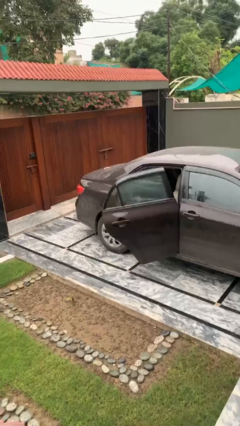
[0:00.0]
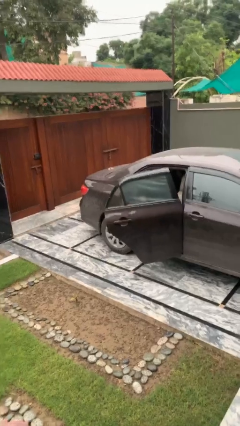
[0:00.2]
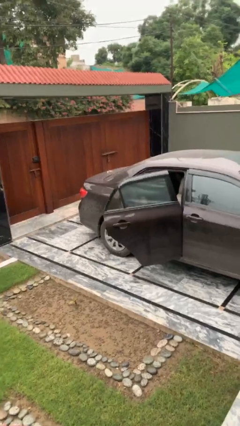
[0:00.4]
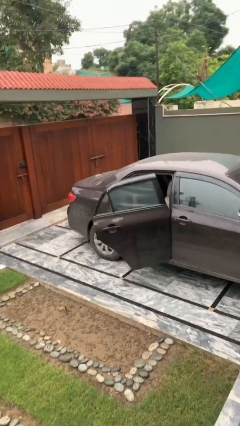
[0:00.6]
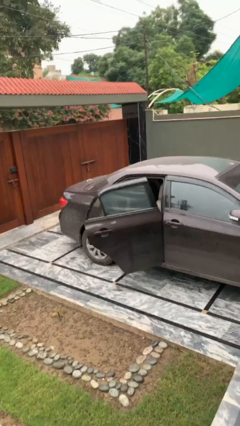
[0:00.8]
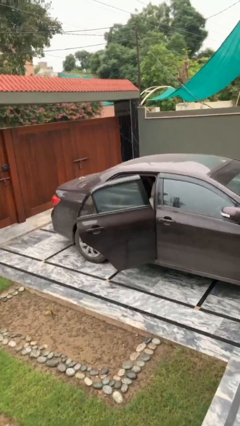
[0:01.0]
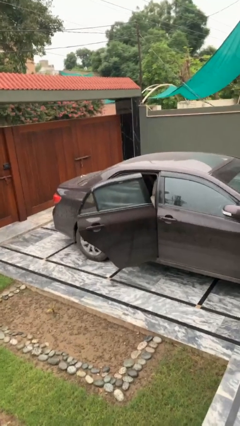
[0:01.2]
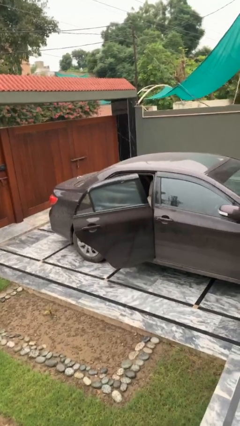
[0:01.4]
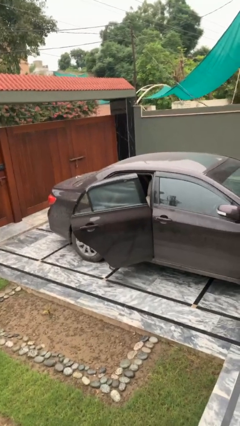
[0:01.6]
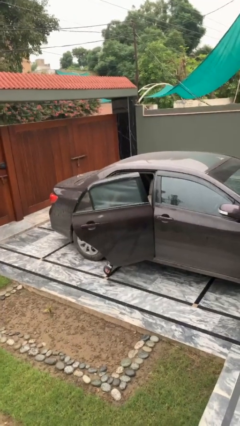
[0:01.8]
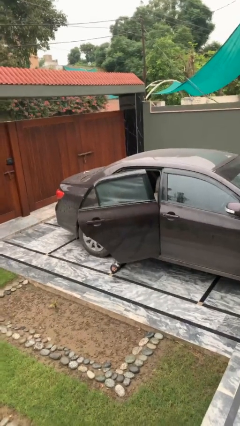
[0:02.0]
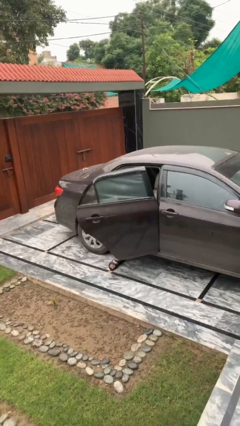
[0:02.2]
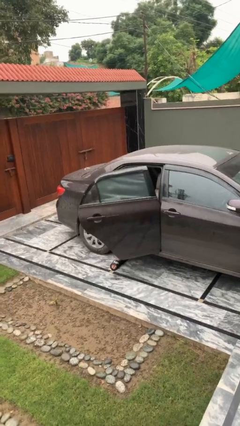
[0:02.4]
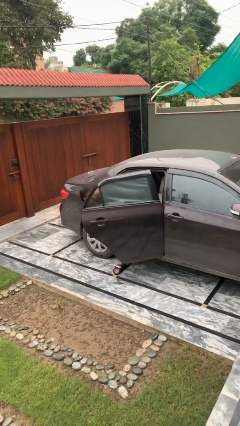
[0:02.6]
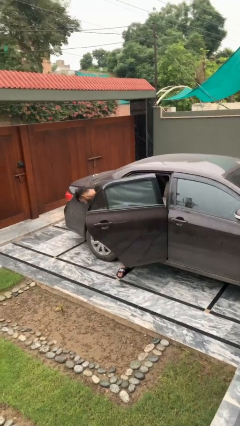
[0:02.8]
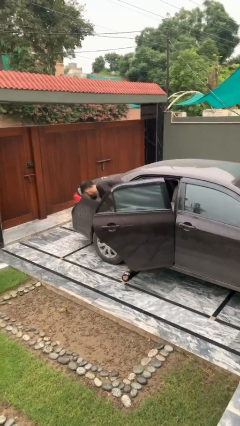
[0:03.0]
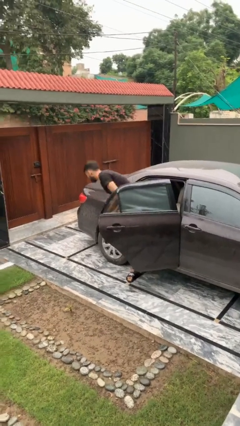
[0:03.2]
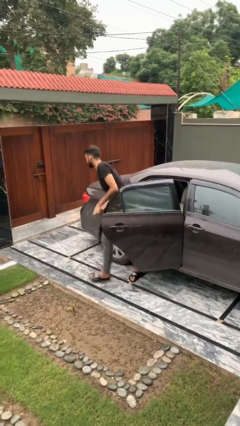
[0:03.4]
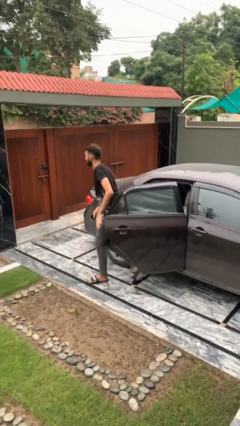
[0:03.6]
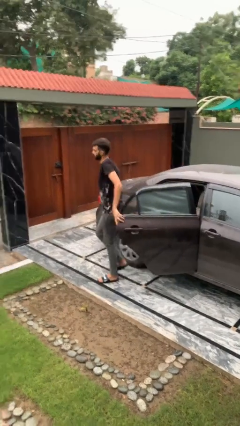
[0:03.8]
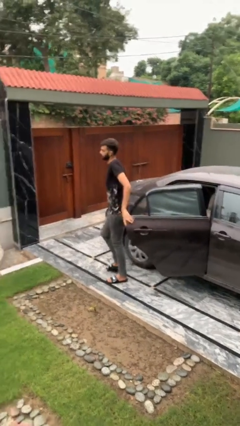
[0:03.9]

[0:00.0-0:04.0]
person exits car

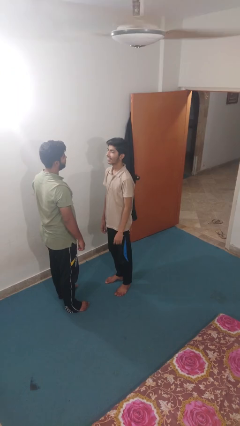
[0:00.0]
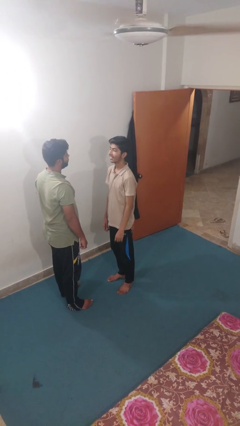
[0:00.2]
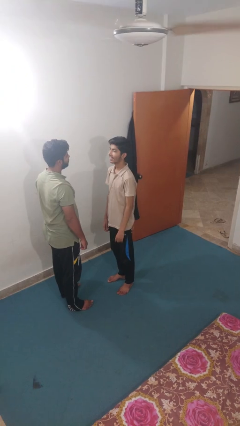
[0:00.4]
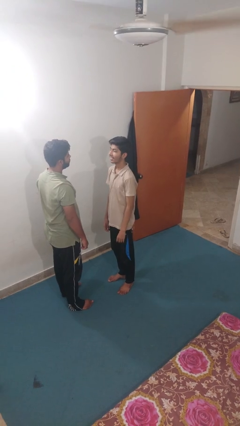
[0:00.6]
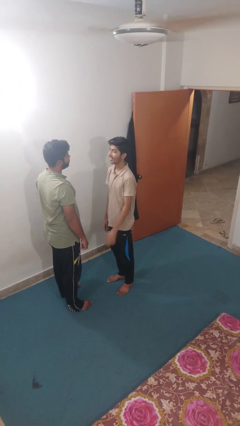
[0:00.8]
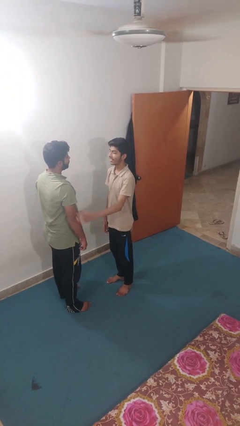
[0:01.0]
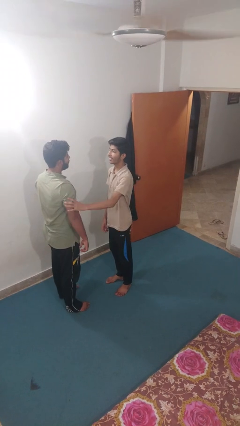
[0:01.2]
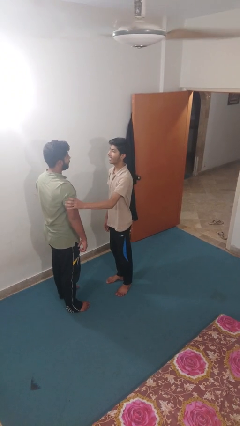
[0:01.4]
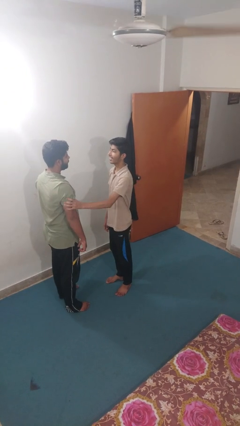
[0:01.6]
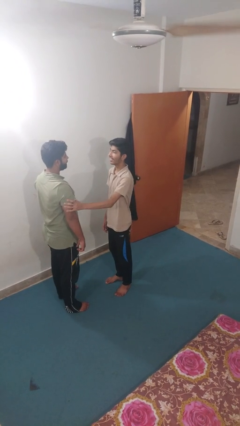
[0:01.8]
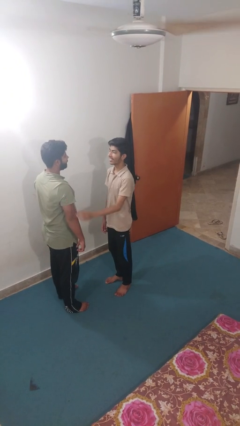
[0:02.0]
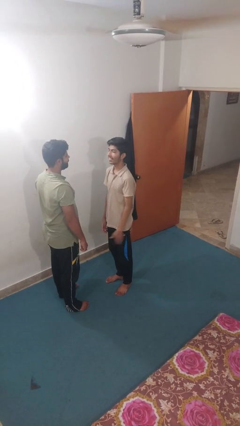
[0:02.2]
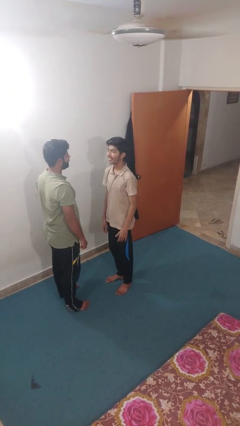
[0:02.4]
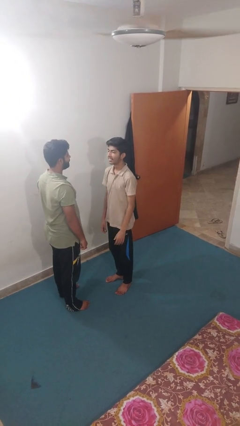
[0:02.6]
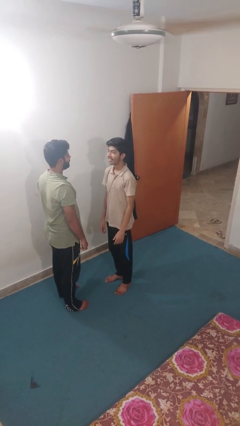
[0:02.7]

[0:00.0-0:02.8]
person grabs person by bicep

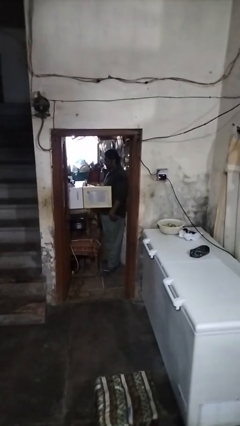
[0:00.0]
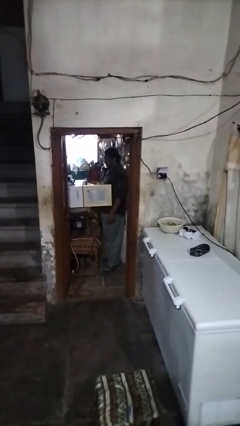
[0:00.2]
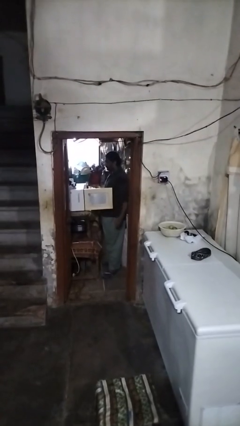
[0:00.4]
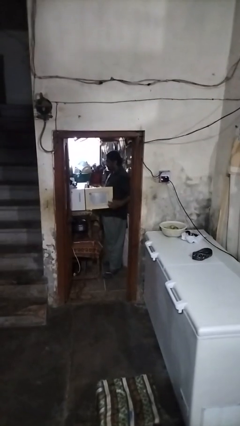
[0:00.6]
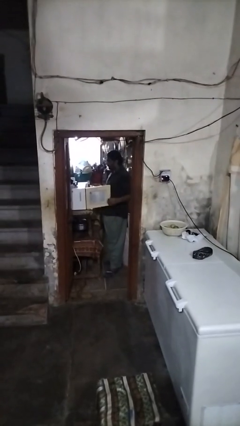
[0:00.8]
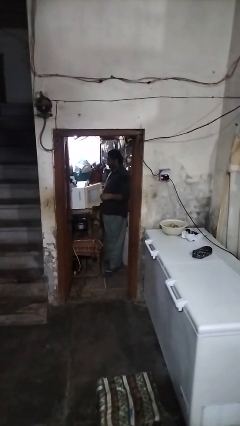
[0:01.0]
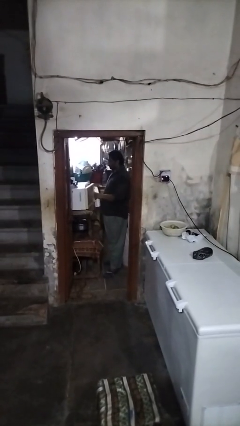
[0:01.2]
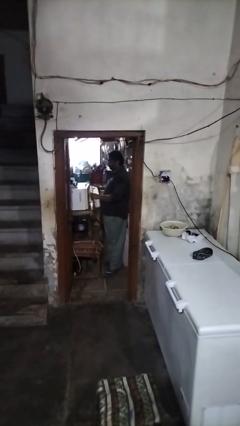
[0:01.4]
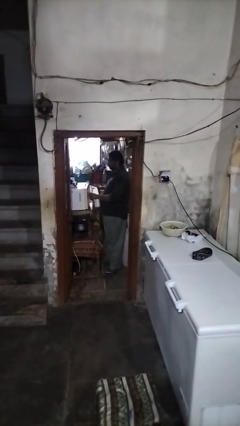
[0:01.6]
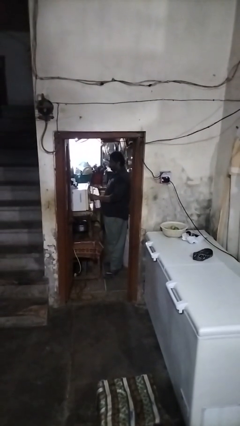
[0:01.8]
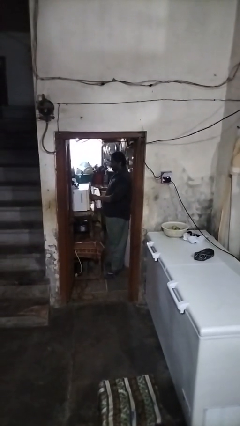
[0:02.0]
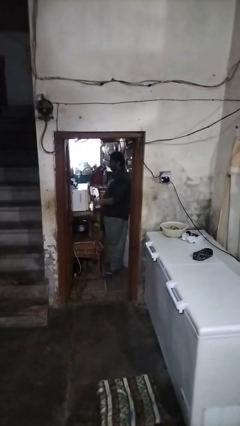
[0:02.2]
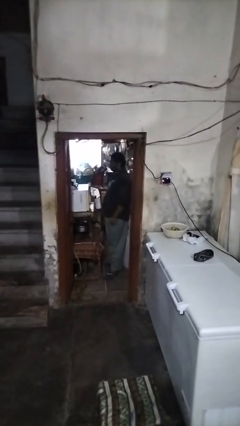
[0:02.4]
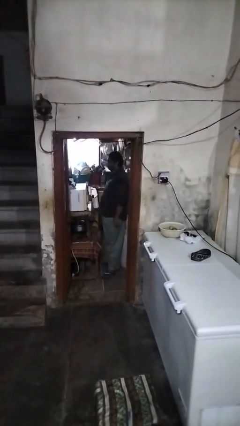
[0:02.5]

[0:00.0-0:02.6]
person closes oven door

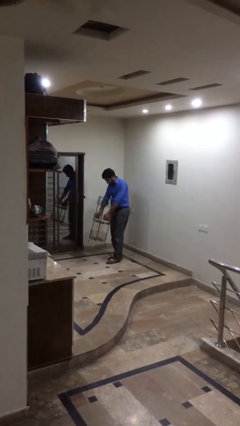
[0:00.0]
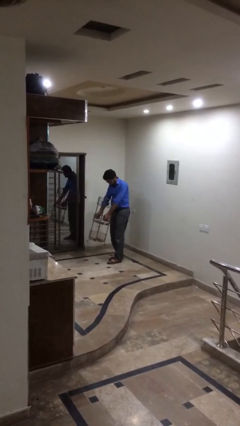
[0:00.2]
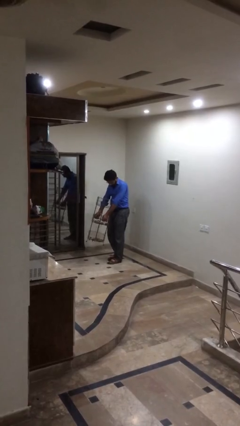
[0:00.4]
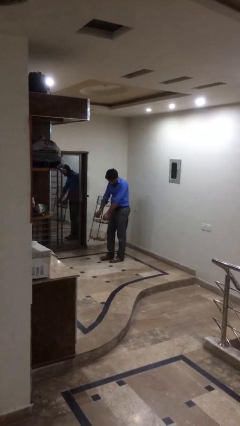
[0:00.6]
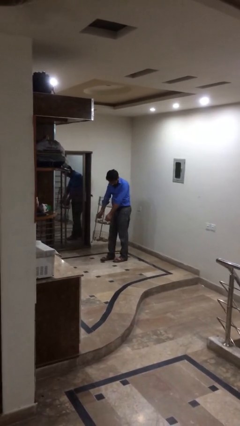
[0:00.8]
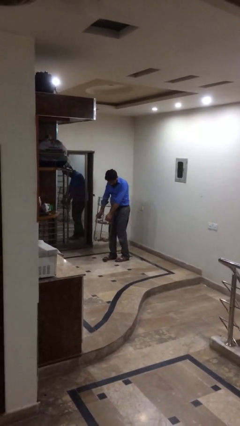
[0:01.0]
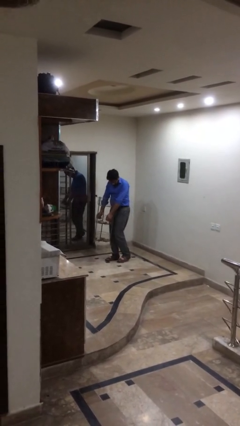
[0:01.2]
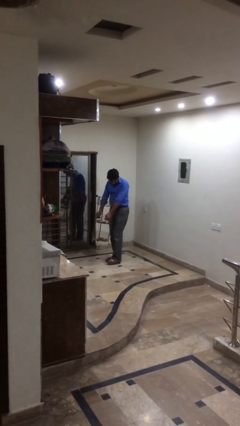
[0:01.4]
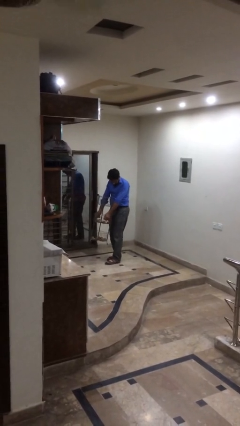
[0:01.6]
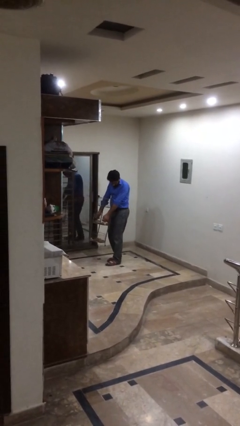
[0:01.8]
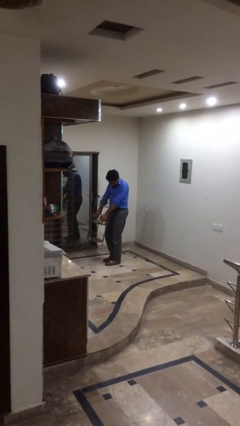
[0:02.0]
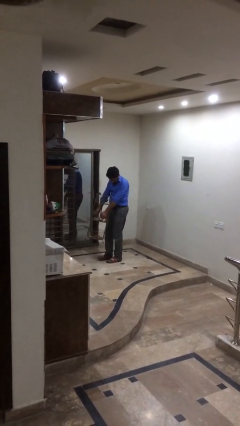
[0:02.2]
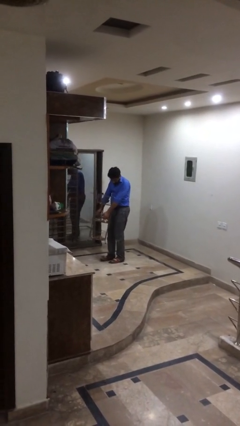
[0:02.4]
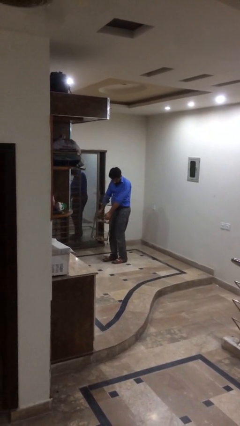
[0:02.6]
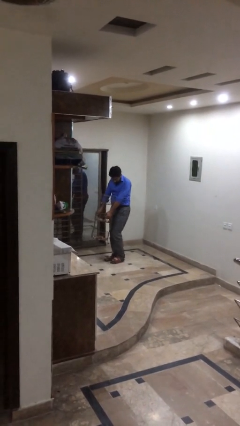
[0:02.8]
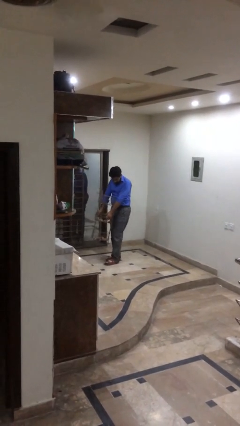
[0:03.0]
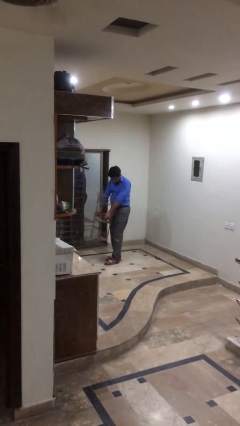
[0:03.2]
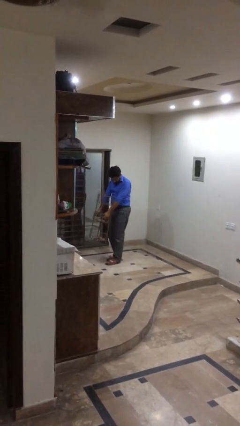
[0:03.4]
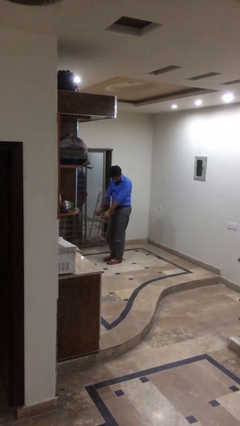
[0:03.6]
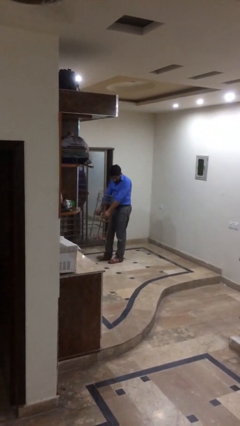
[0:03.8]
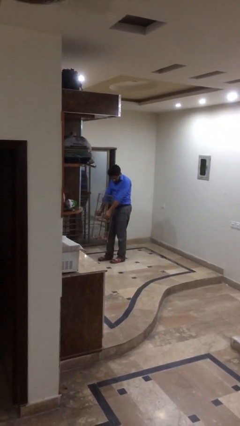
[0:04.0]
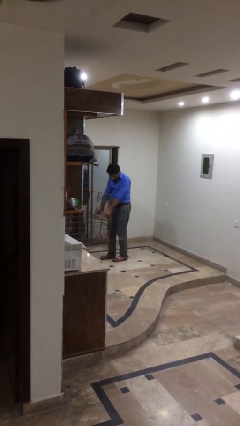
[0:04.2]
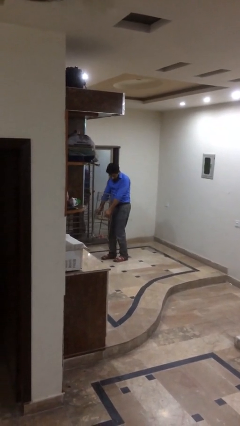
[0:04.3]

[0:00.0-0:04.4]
person carries heavy object

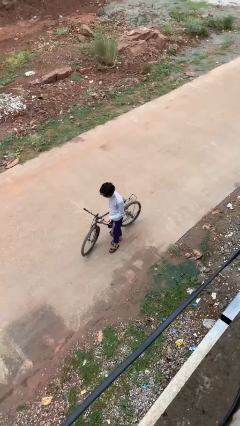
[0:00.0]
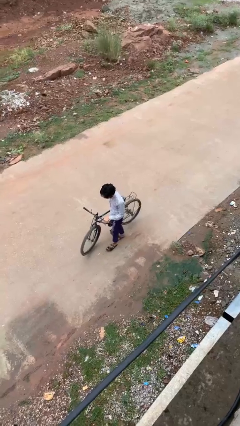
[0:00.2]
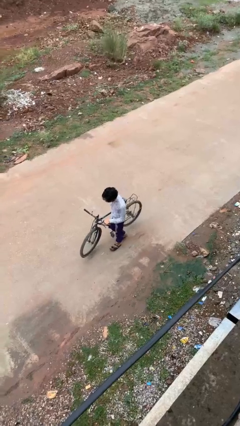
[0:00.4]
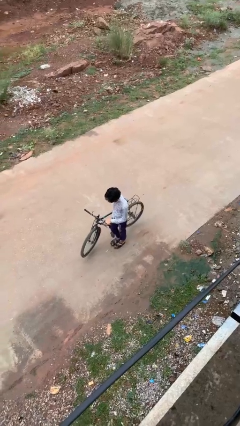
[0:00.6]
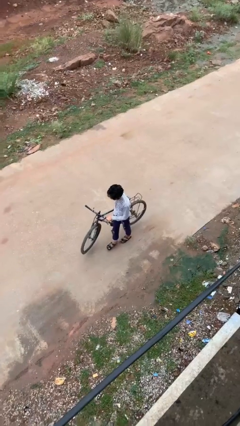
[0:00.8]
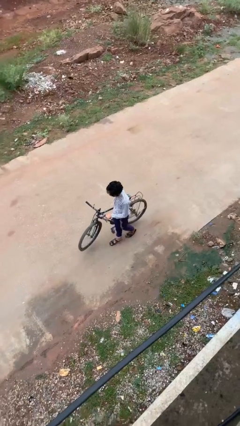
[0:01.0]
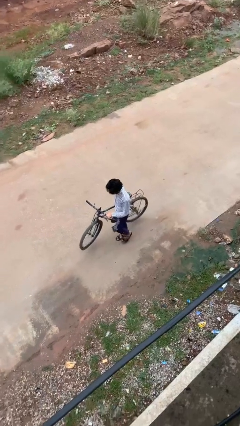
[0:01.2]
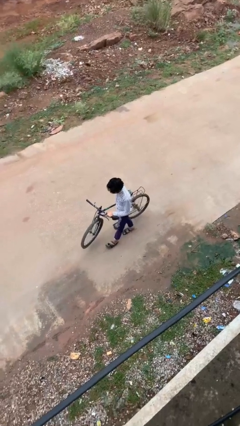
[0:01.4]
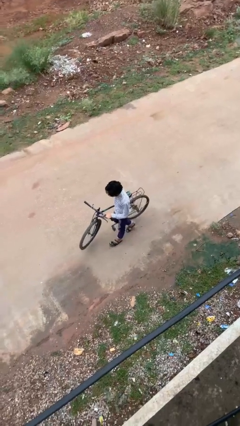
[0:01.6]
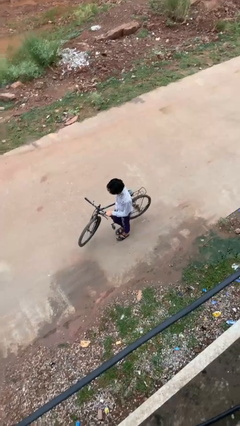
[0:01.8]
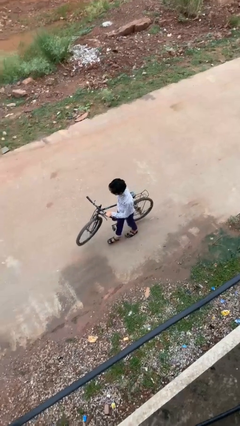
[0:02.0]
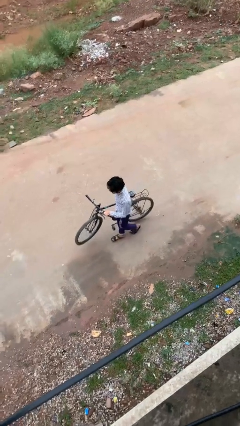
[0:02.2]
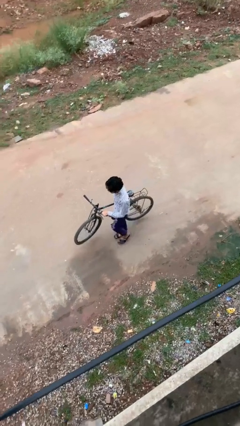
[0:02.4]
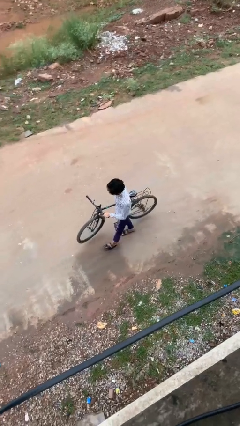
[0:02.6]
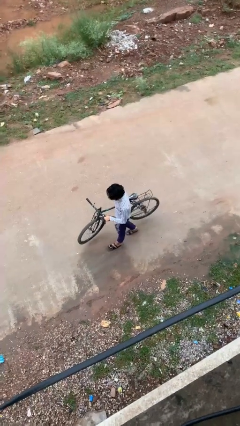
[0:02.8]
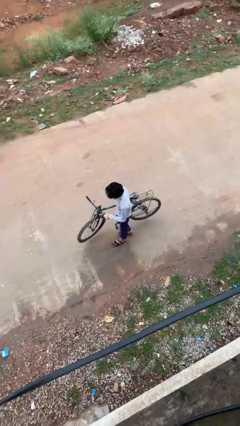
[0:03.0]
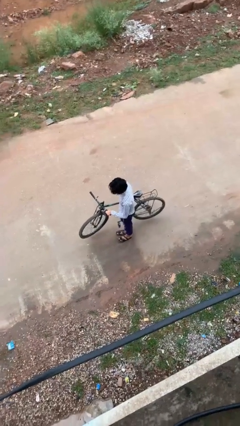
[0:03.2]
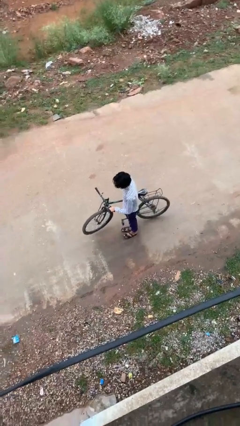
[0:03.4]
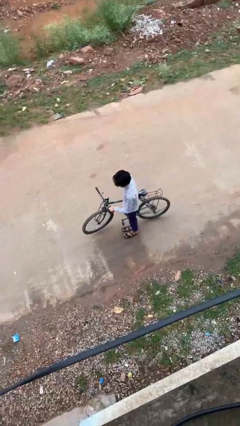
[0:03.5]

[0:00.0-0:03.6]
person carries bicycle

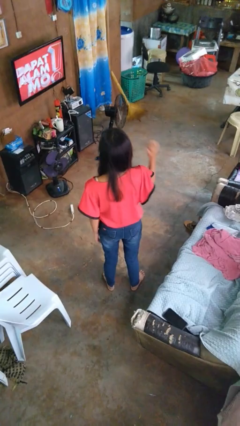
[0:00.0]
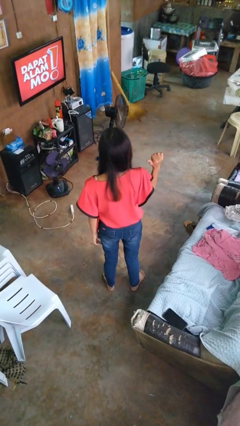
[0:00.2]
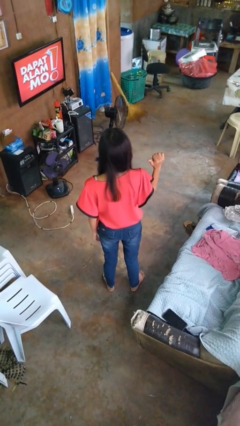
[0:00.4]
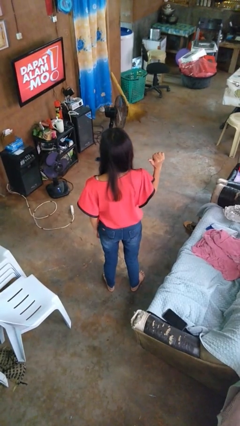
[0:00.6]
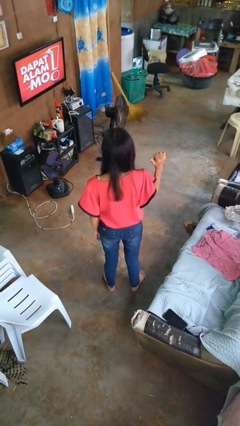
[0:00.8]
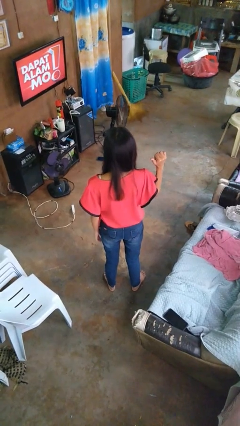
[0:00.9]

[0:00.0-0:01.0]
person gestures cut
